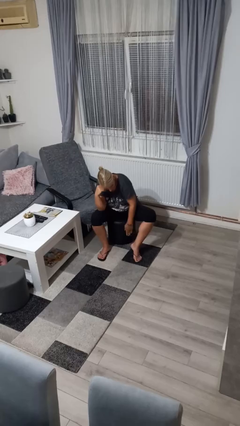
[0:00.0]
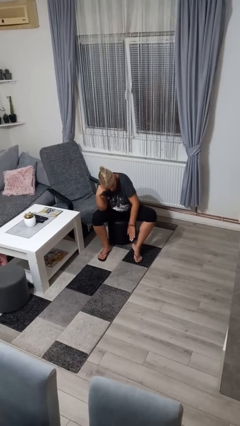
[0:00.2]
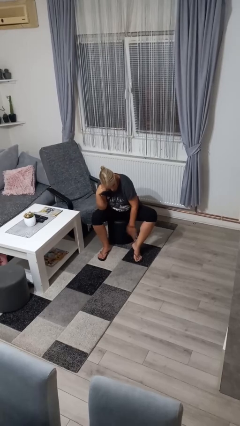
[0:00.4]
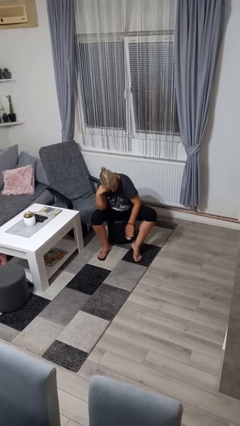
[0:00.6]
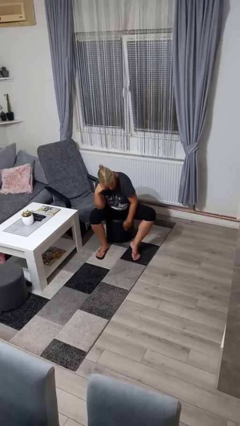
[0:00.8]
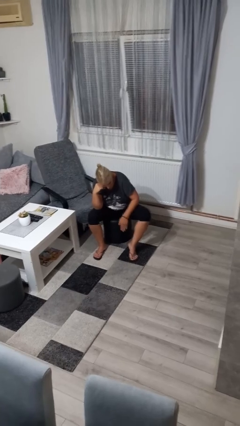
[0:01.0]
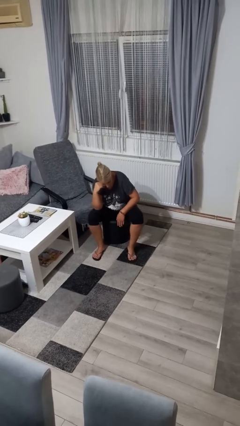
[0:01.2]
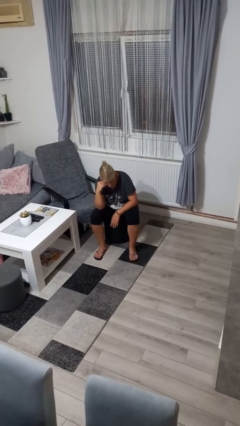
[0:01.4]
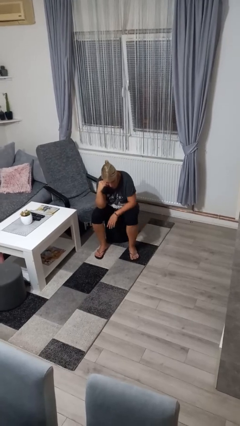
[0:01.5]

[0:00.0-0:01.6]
person swats bug

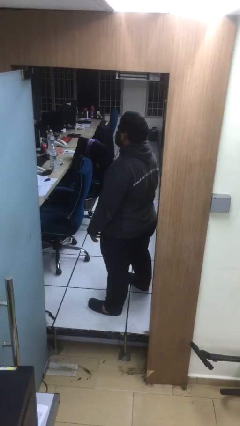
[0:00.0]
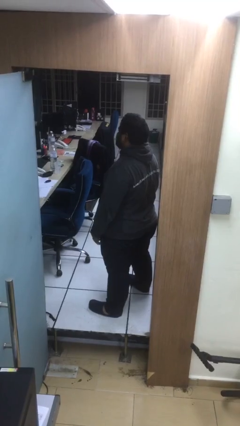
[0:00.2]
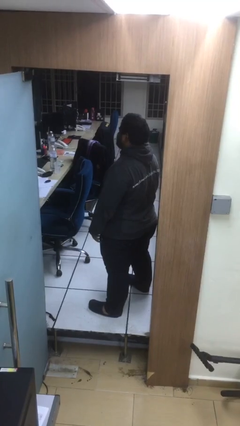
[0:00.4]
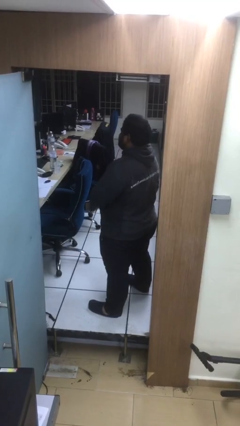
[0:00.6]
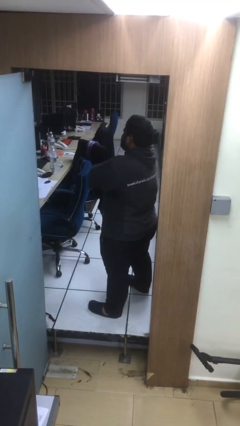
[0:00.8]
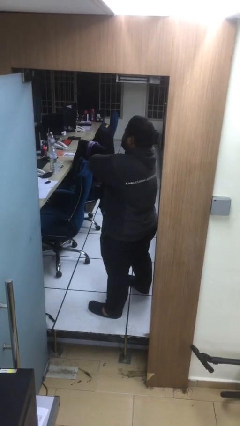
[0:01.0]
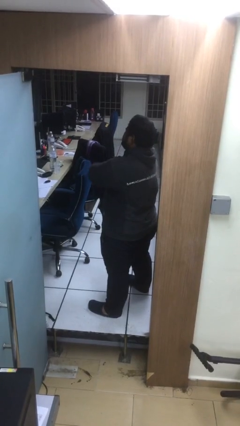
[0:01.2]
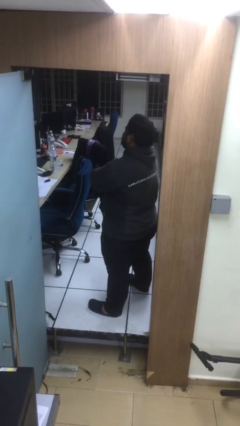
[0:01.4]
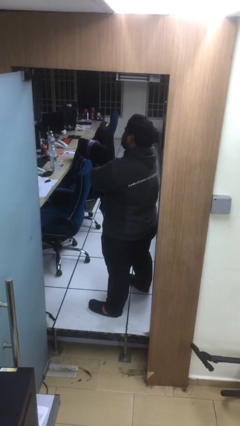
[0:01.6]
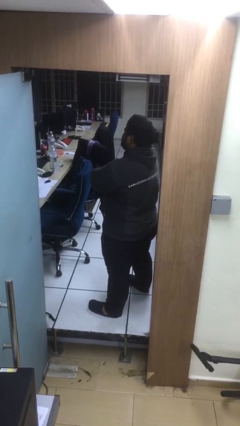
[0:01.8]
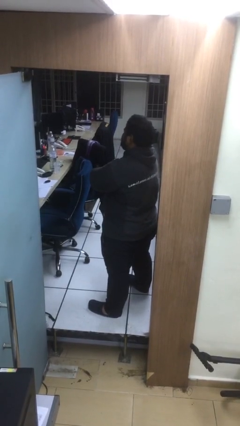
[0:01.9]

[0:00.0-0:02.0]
person crosses arms

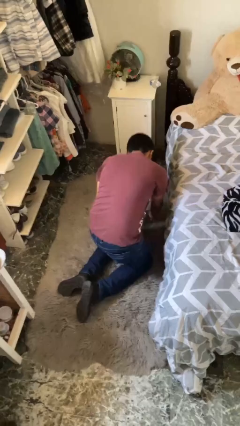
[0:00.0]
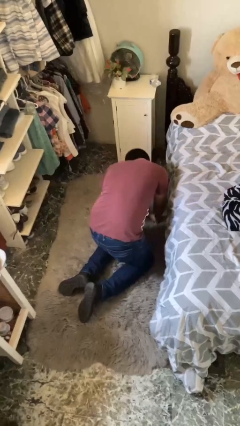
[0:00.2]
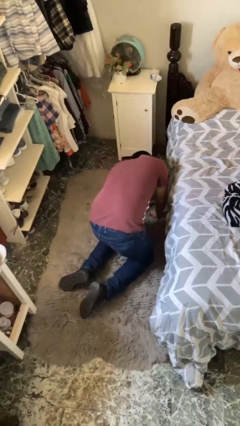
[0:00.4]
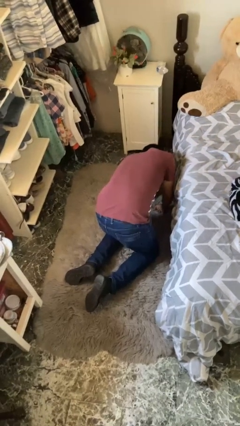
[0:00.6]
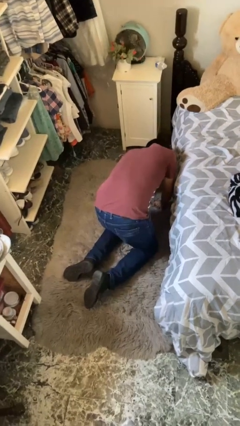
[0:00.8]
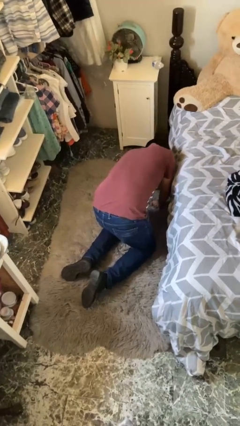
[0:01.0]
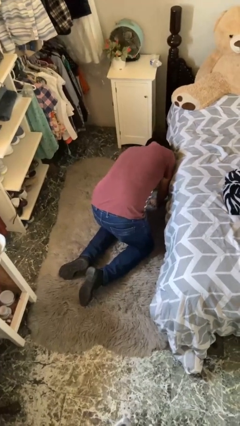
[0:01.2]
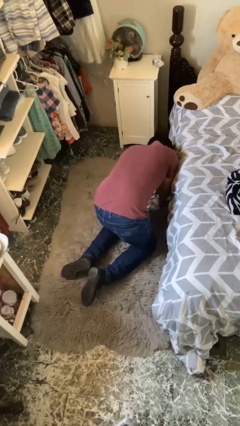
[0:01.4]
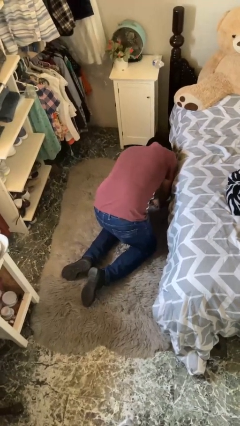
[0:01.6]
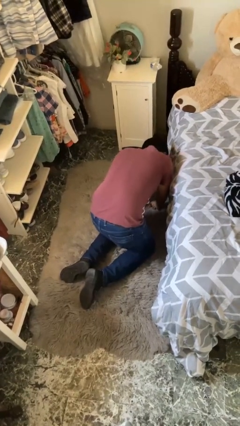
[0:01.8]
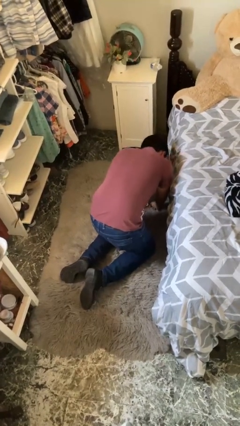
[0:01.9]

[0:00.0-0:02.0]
person searches under bed

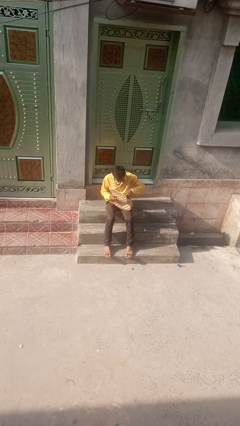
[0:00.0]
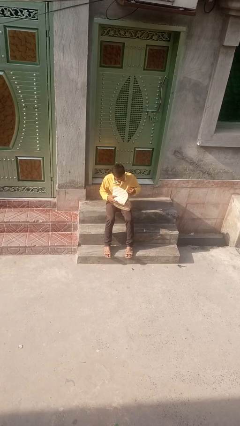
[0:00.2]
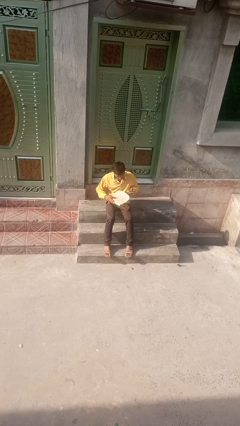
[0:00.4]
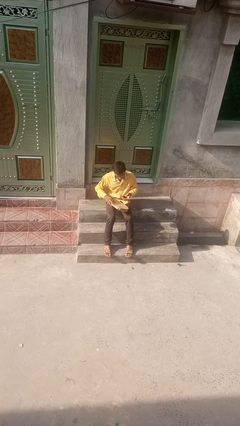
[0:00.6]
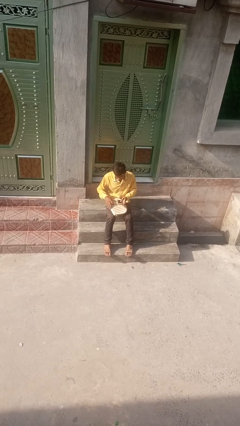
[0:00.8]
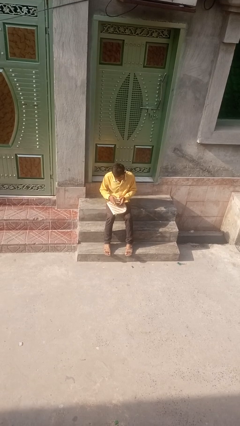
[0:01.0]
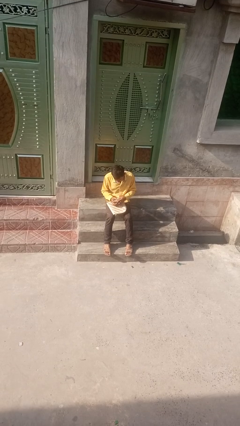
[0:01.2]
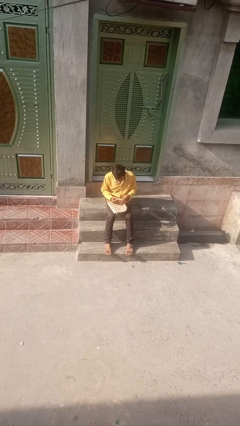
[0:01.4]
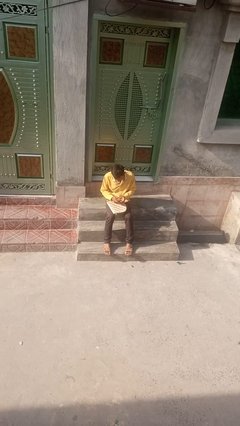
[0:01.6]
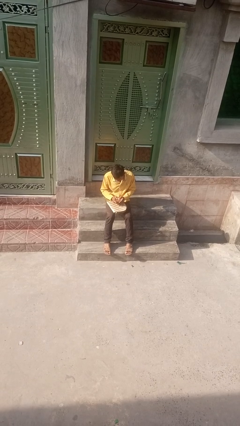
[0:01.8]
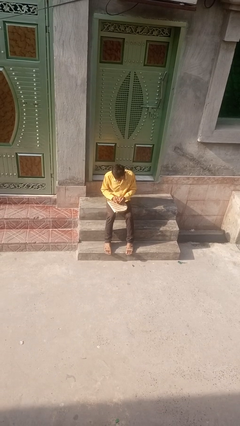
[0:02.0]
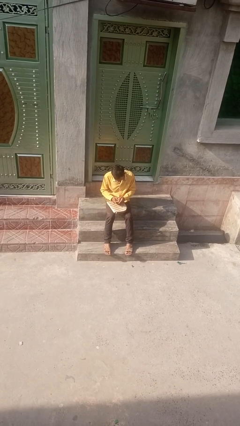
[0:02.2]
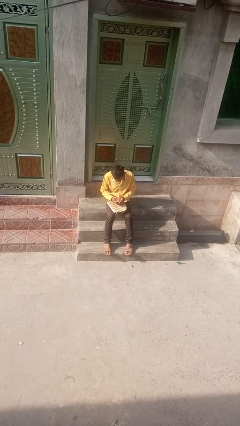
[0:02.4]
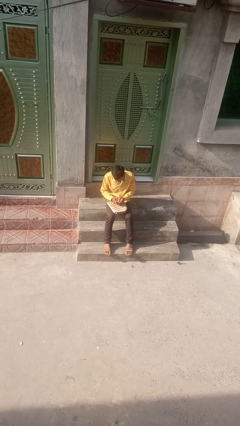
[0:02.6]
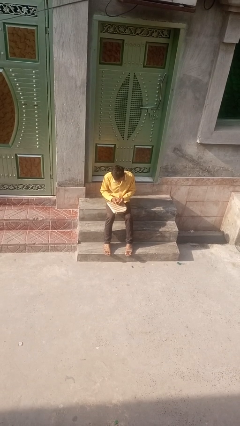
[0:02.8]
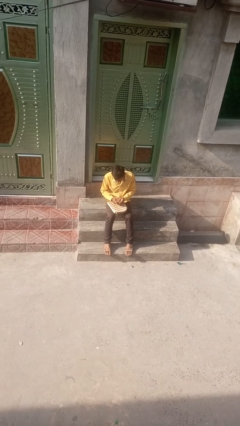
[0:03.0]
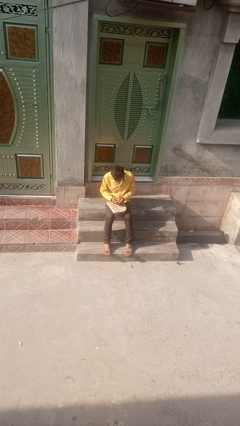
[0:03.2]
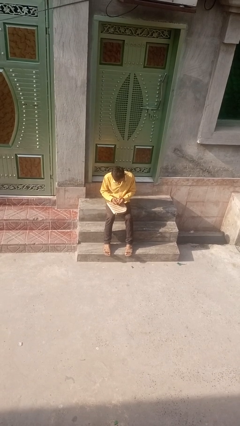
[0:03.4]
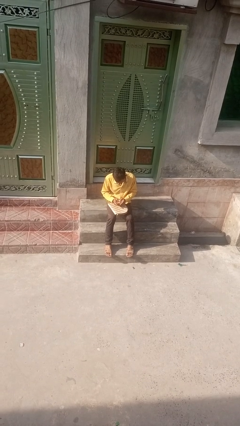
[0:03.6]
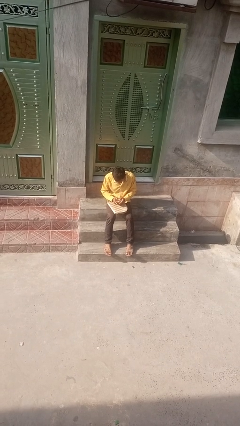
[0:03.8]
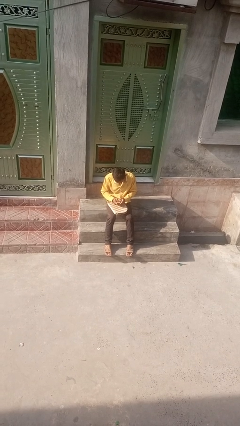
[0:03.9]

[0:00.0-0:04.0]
person takes object from backpack

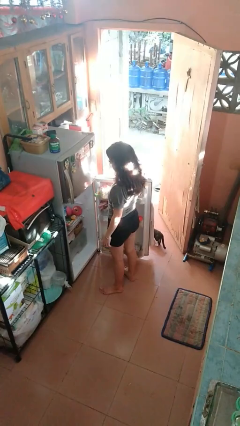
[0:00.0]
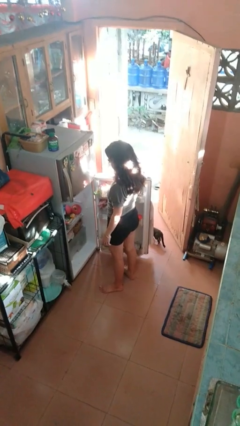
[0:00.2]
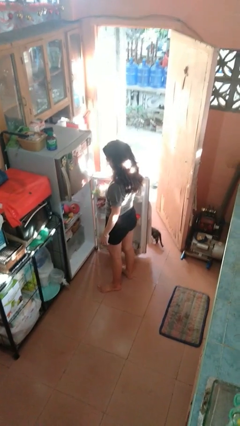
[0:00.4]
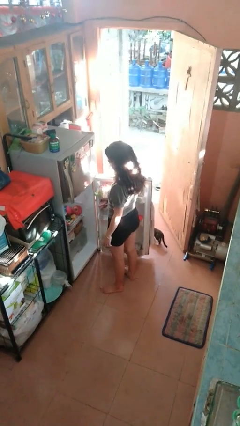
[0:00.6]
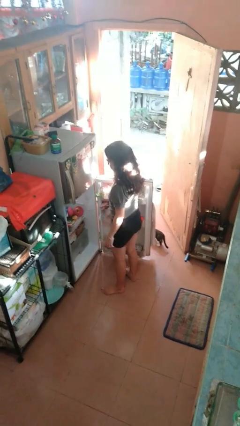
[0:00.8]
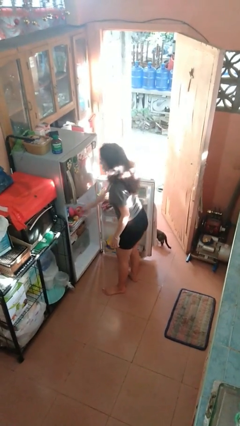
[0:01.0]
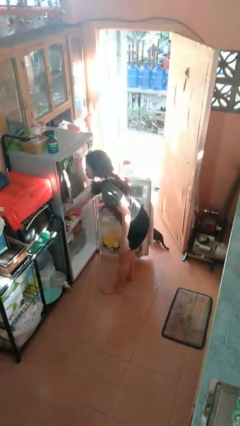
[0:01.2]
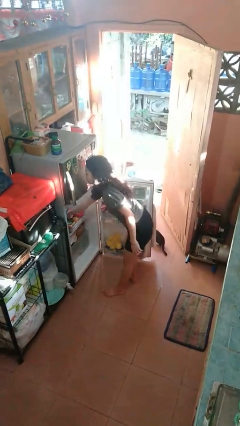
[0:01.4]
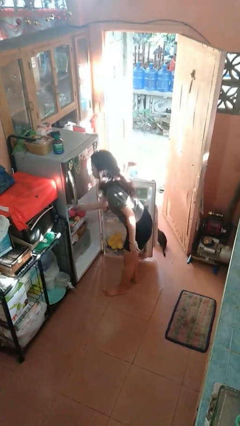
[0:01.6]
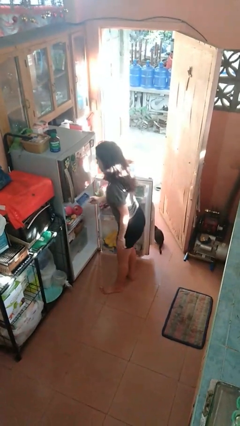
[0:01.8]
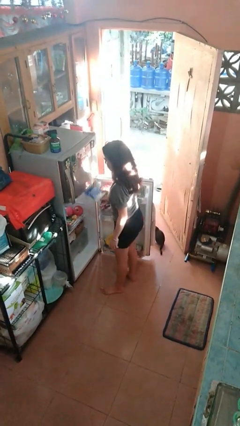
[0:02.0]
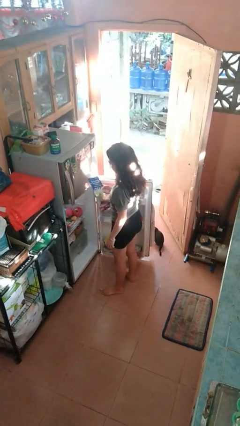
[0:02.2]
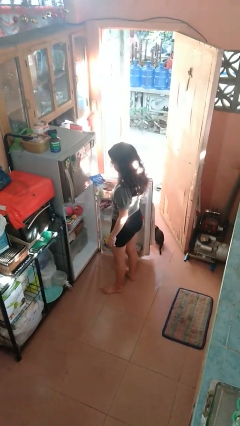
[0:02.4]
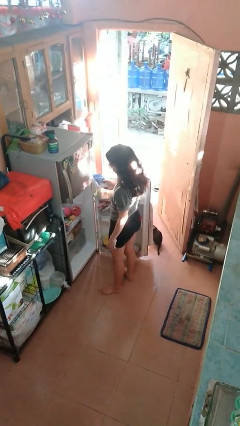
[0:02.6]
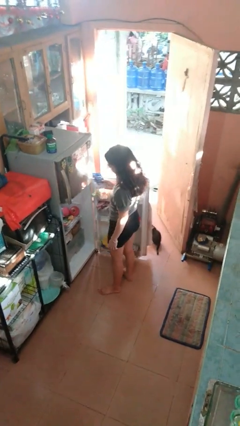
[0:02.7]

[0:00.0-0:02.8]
person takes object from refrigerator

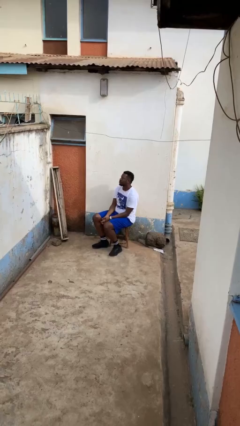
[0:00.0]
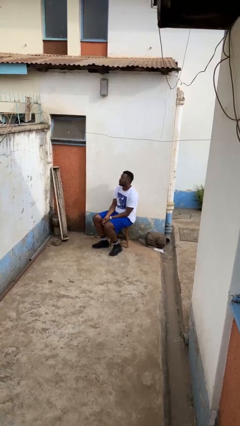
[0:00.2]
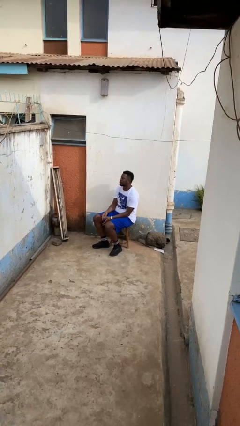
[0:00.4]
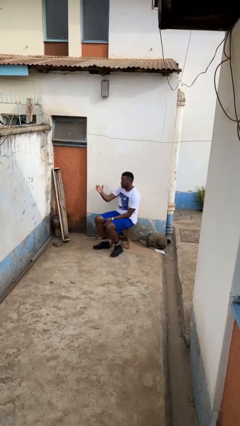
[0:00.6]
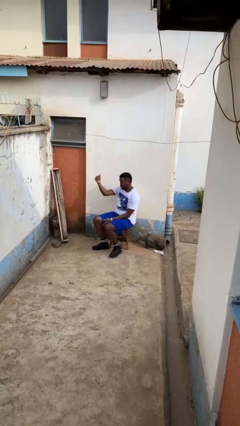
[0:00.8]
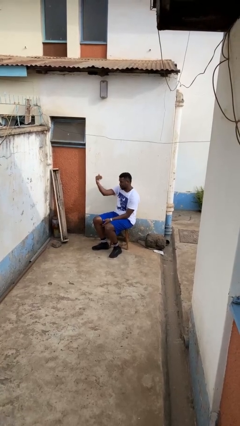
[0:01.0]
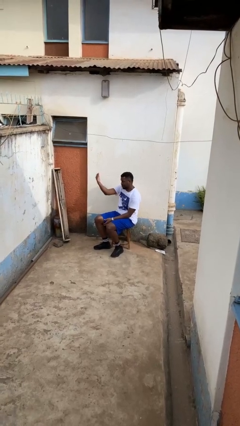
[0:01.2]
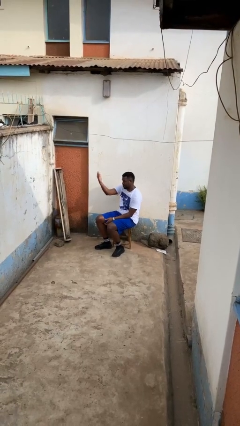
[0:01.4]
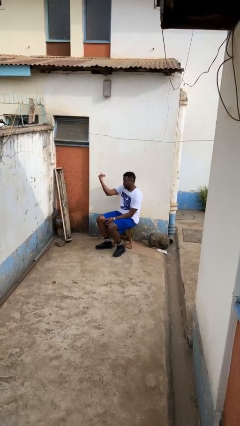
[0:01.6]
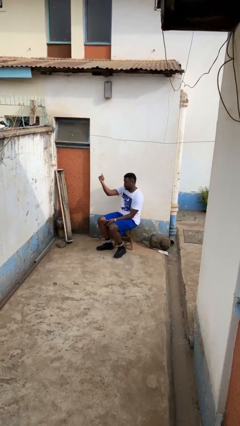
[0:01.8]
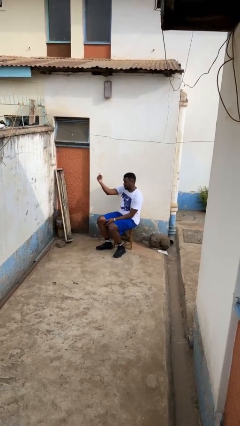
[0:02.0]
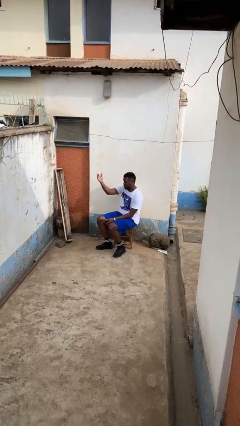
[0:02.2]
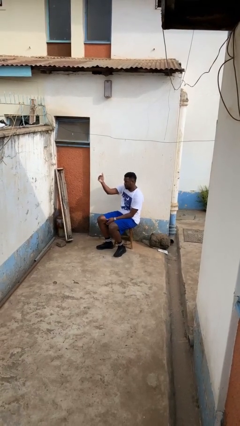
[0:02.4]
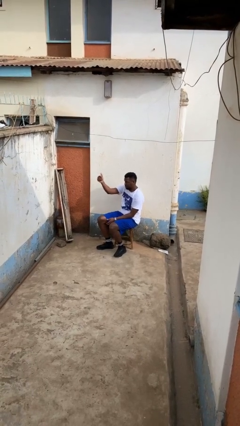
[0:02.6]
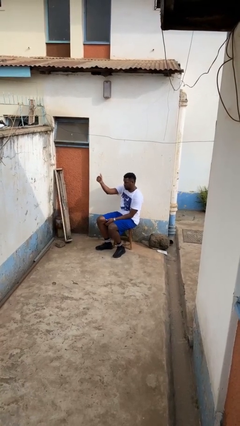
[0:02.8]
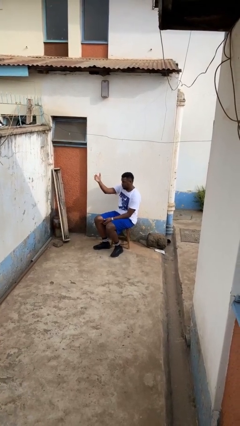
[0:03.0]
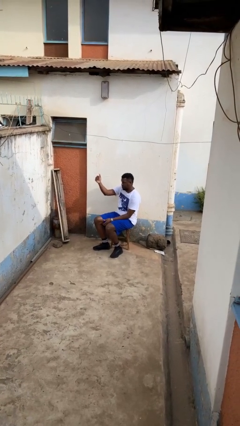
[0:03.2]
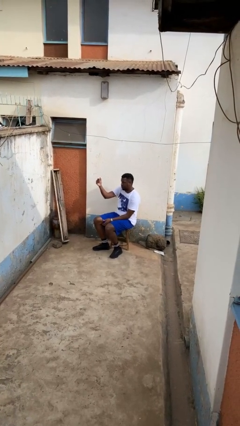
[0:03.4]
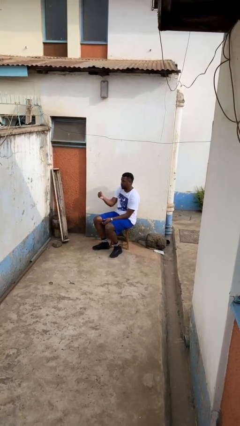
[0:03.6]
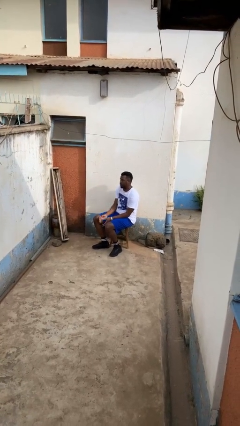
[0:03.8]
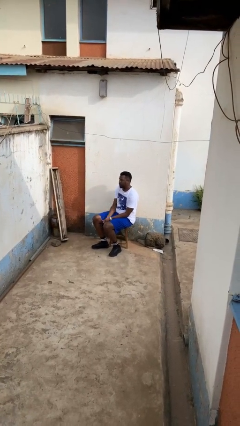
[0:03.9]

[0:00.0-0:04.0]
person gestures come here

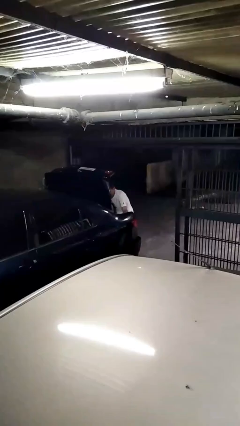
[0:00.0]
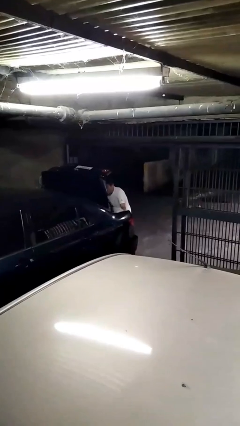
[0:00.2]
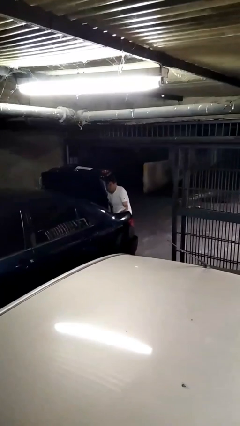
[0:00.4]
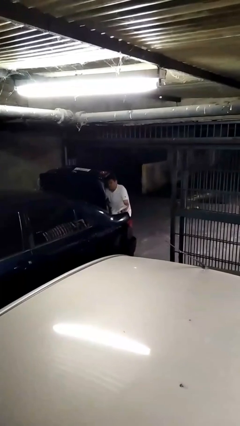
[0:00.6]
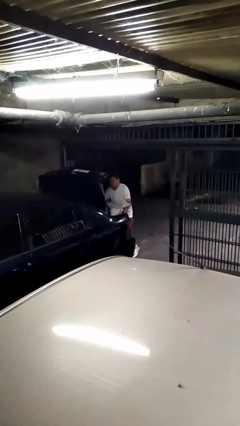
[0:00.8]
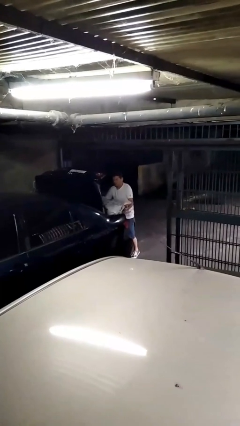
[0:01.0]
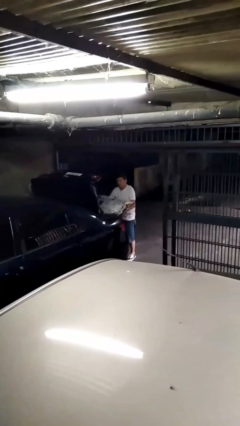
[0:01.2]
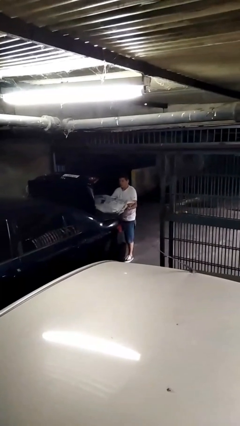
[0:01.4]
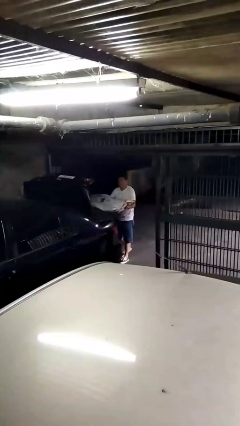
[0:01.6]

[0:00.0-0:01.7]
person unloads car
